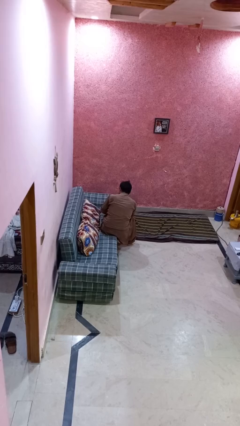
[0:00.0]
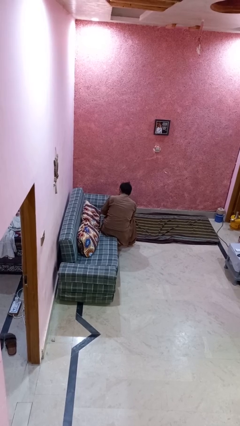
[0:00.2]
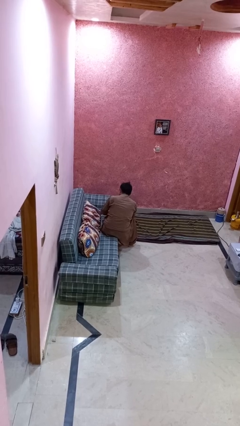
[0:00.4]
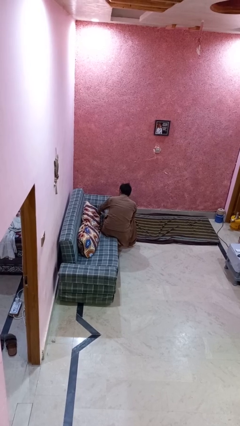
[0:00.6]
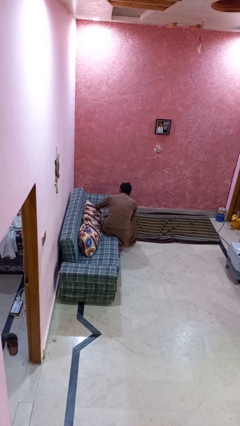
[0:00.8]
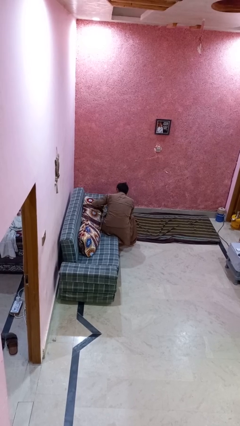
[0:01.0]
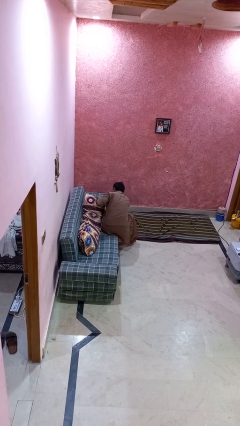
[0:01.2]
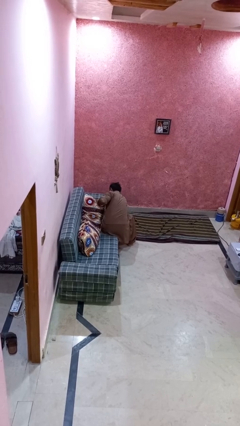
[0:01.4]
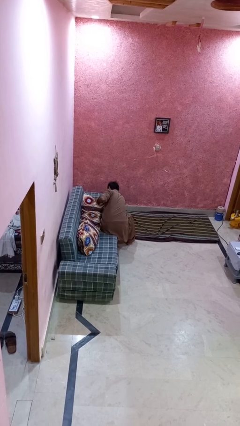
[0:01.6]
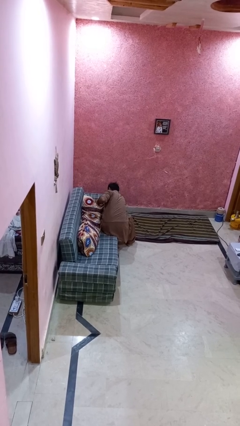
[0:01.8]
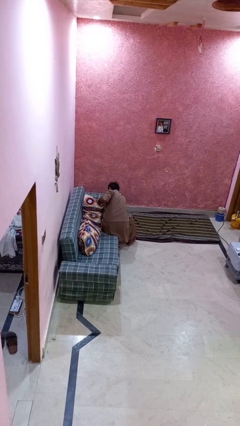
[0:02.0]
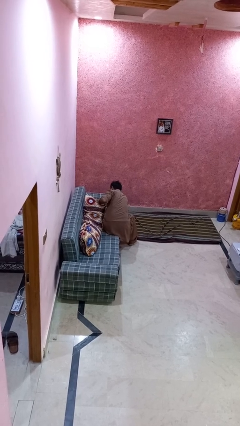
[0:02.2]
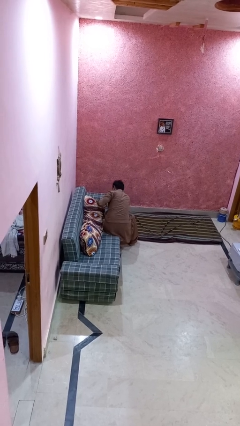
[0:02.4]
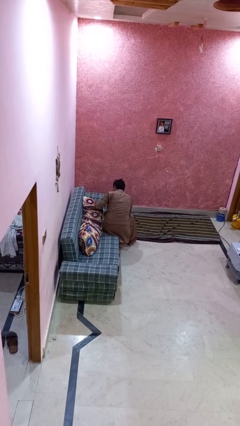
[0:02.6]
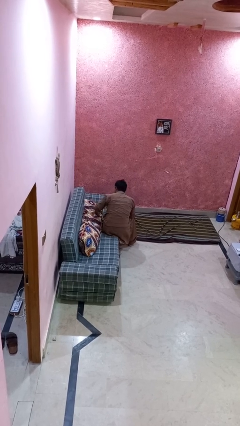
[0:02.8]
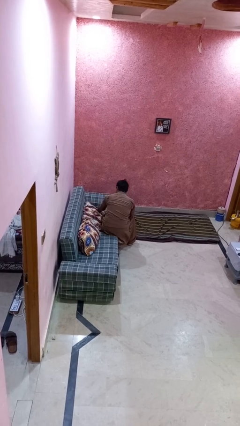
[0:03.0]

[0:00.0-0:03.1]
person searches in couch

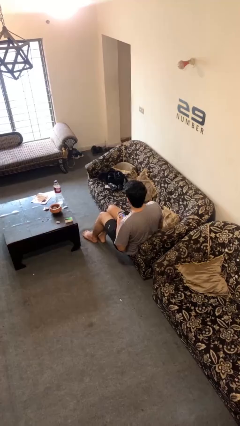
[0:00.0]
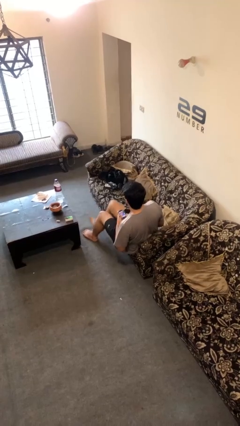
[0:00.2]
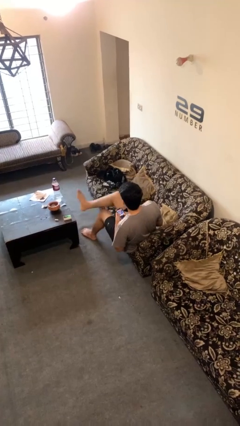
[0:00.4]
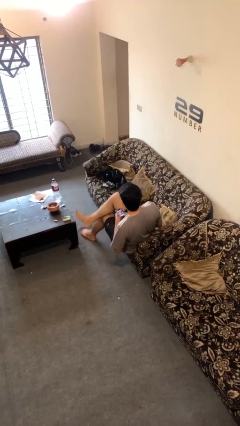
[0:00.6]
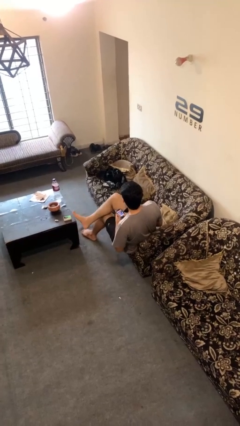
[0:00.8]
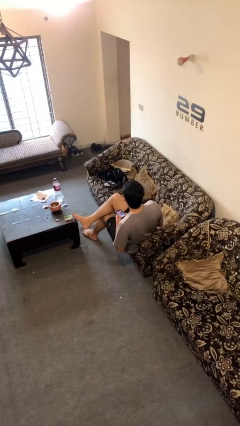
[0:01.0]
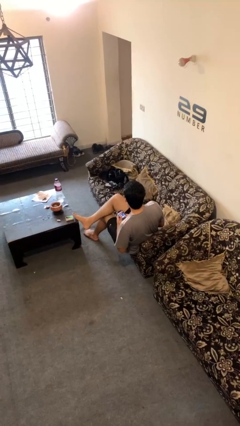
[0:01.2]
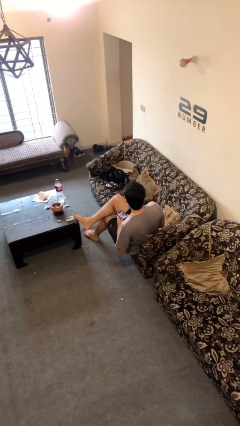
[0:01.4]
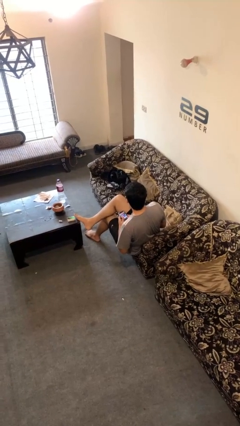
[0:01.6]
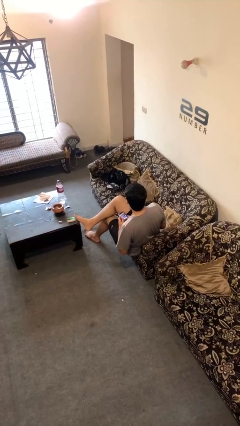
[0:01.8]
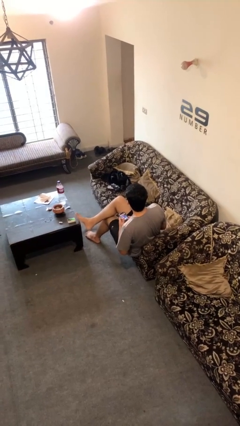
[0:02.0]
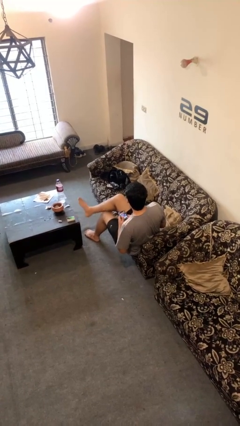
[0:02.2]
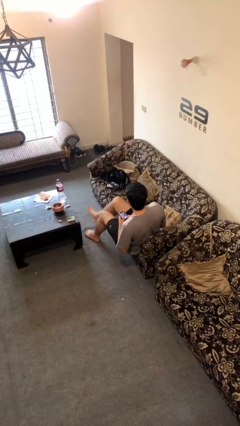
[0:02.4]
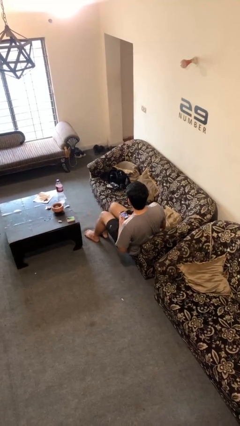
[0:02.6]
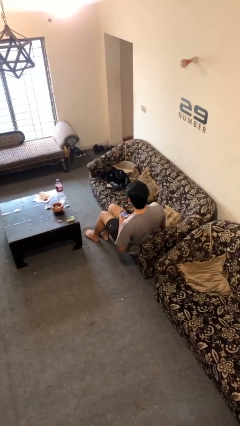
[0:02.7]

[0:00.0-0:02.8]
person crosses legs

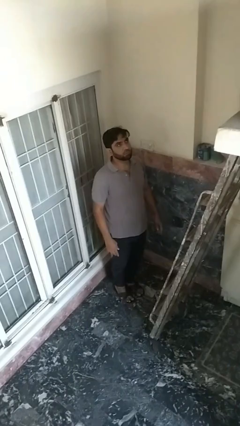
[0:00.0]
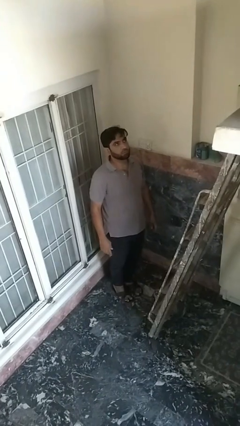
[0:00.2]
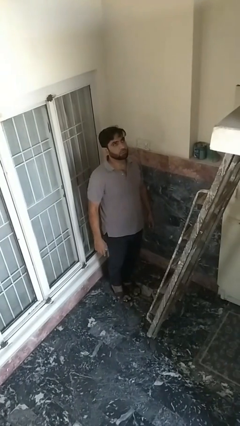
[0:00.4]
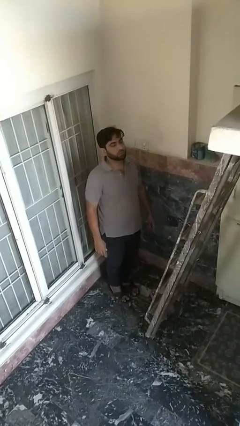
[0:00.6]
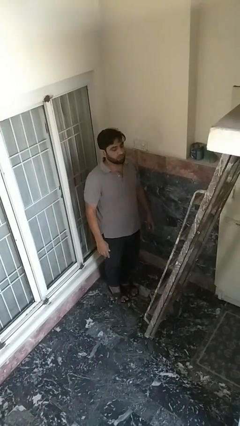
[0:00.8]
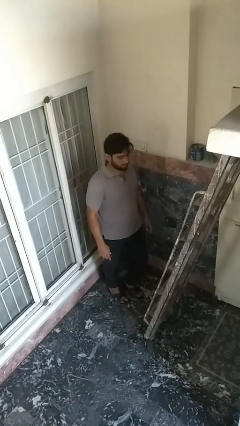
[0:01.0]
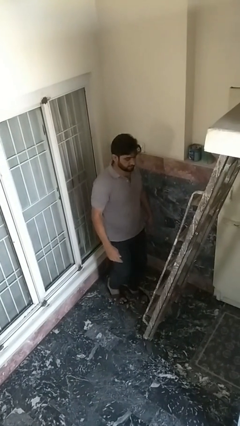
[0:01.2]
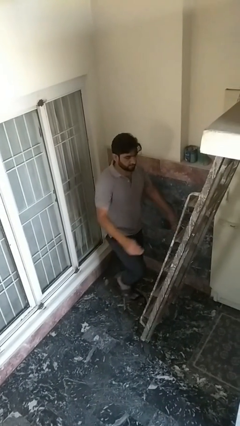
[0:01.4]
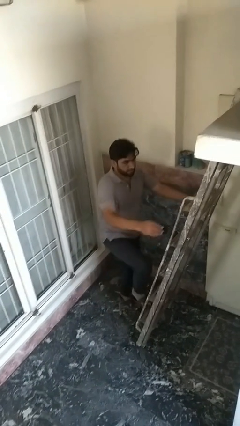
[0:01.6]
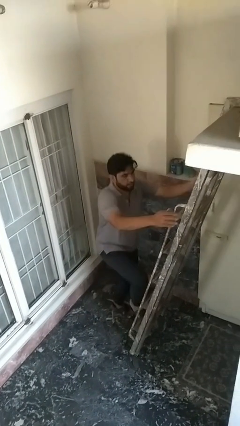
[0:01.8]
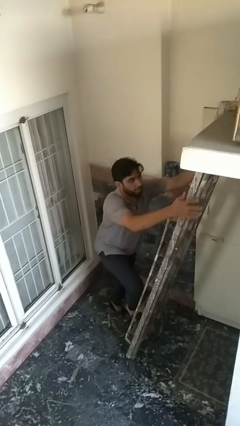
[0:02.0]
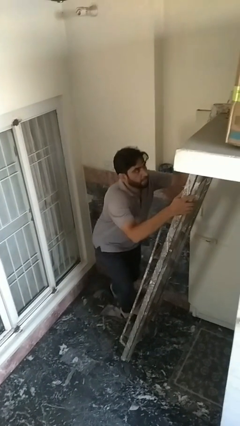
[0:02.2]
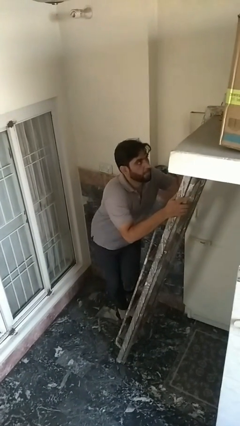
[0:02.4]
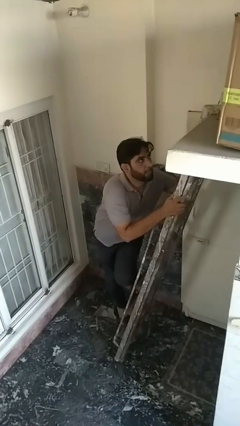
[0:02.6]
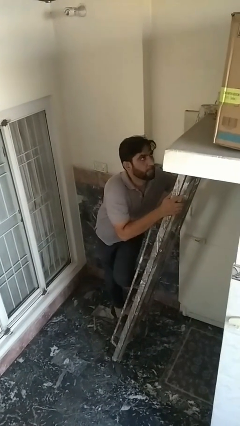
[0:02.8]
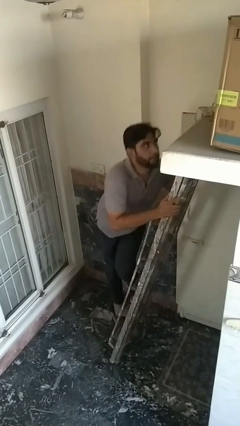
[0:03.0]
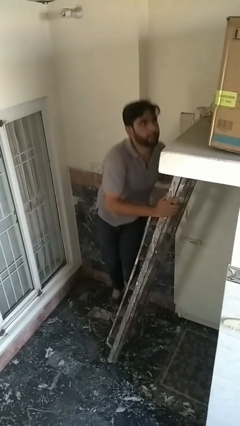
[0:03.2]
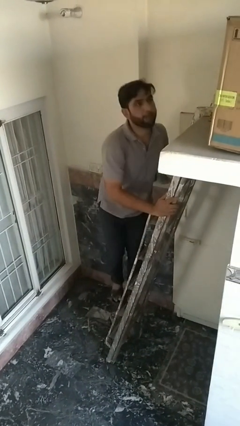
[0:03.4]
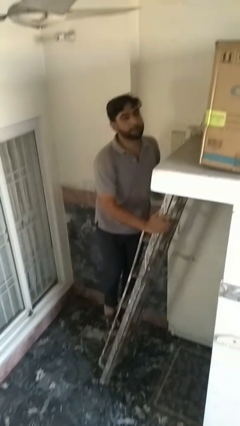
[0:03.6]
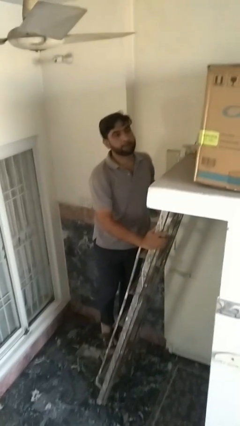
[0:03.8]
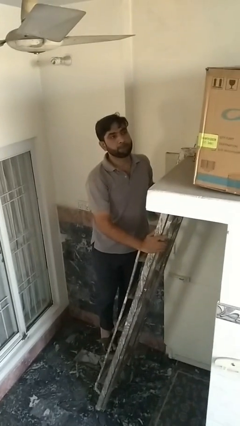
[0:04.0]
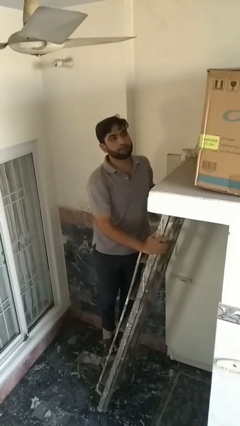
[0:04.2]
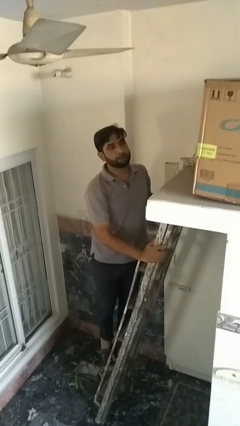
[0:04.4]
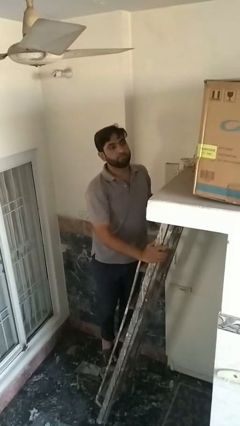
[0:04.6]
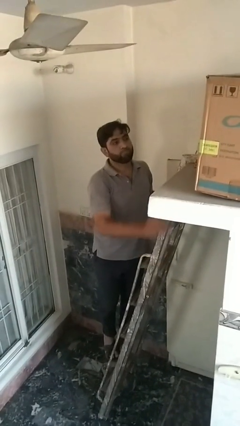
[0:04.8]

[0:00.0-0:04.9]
person climbs up ladder

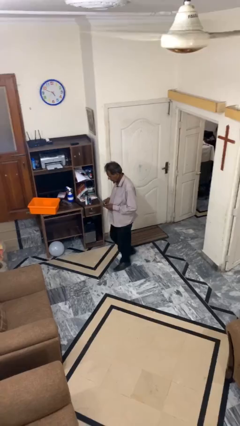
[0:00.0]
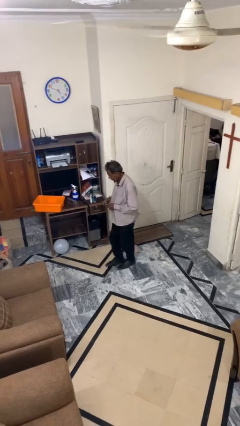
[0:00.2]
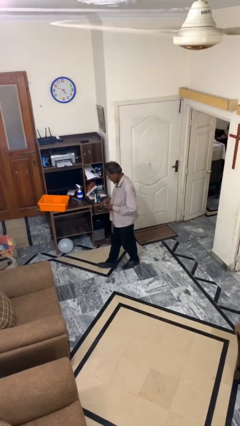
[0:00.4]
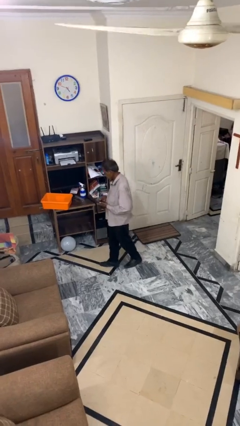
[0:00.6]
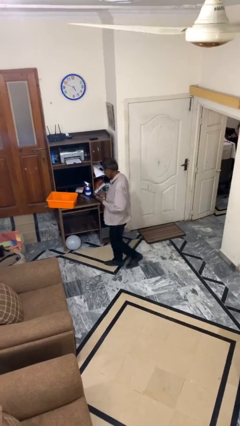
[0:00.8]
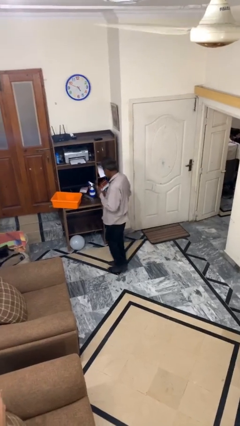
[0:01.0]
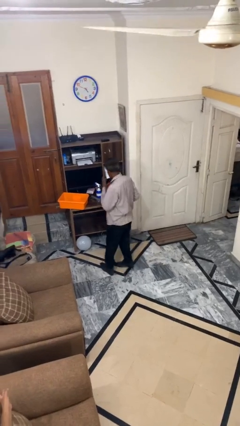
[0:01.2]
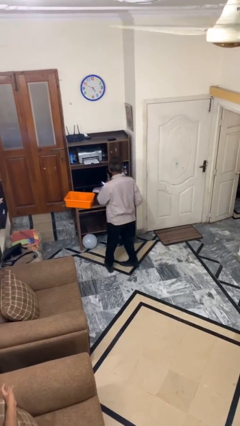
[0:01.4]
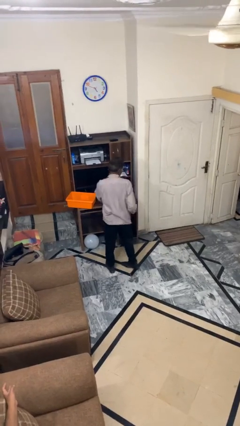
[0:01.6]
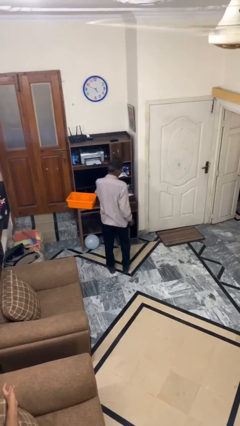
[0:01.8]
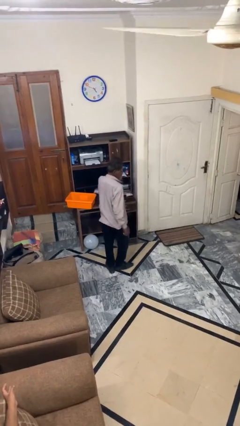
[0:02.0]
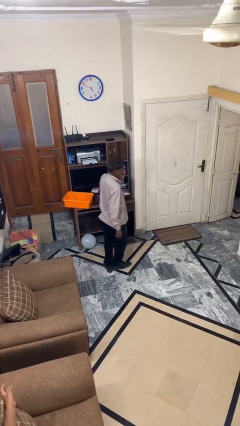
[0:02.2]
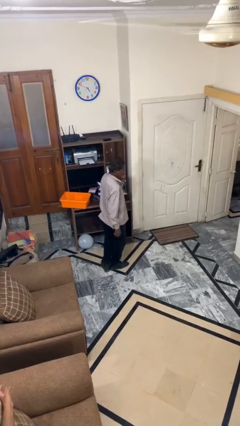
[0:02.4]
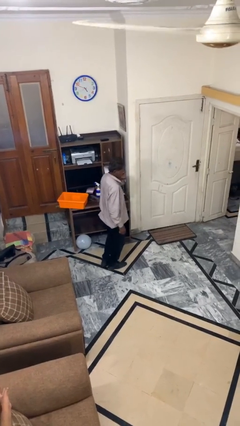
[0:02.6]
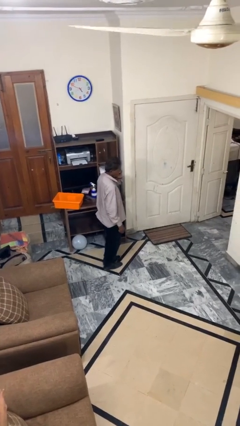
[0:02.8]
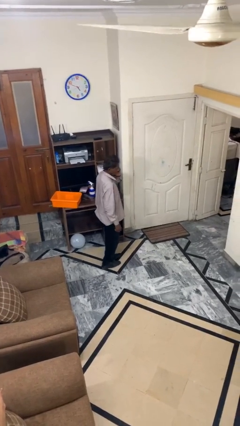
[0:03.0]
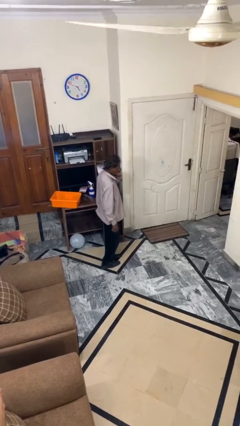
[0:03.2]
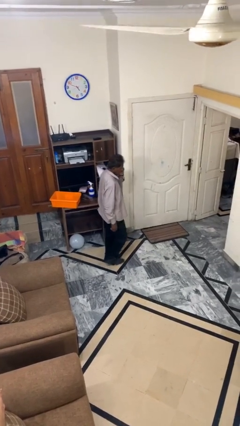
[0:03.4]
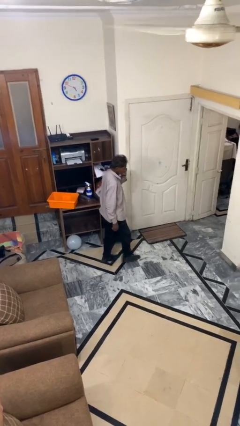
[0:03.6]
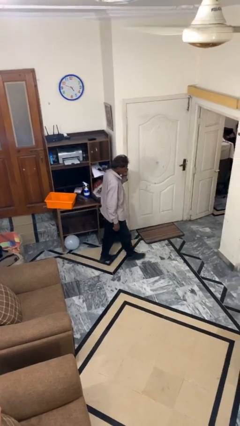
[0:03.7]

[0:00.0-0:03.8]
person talks on phone

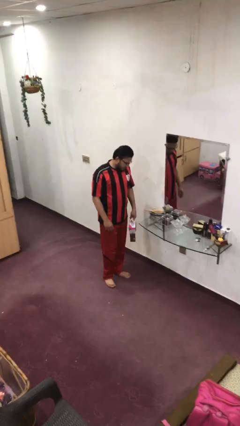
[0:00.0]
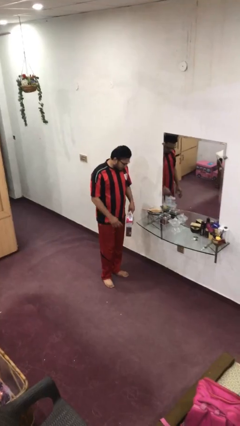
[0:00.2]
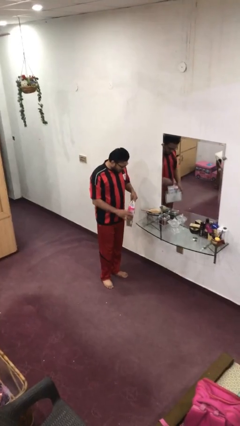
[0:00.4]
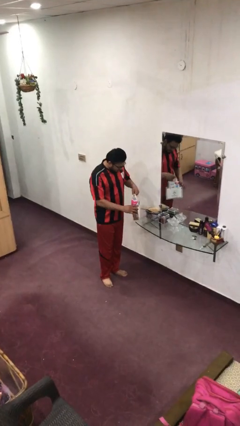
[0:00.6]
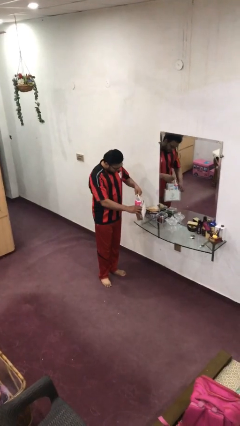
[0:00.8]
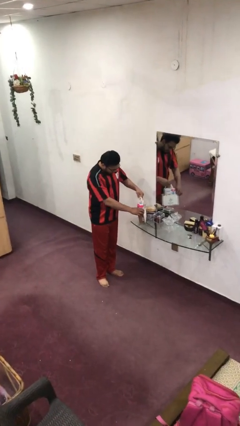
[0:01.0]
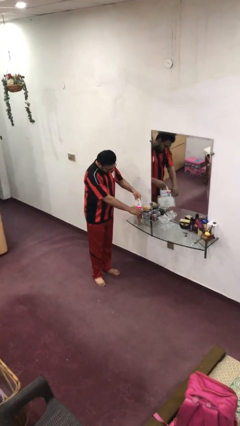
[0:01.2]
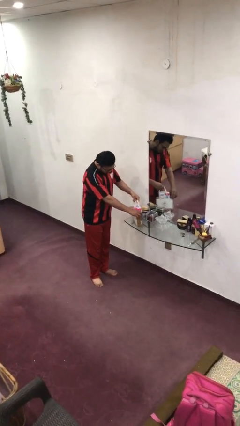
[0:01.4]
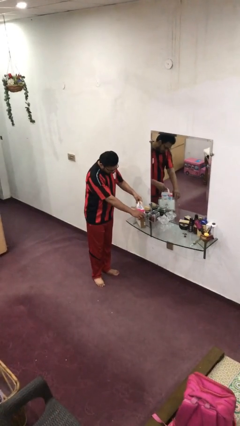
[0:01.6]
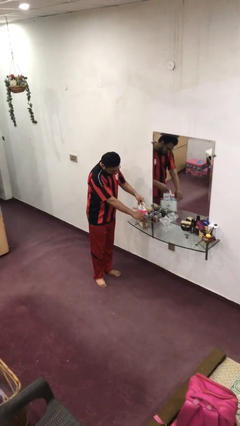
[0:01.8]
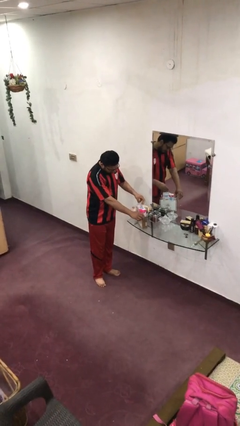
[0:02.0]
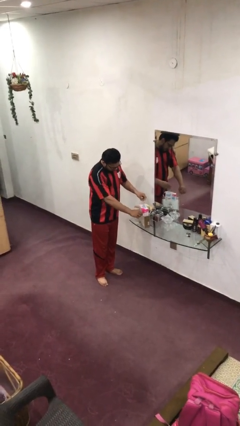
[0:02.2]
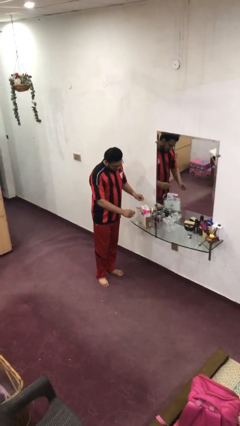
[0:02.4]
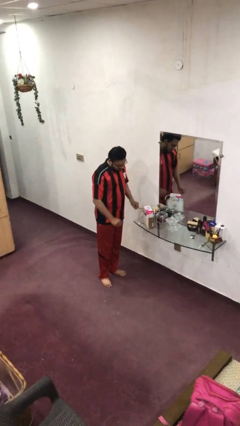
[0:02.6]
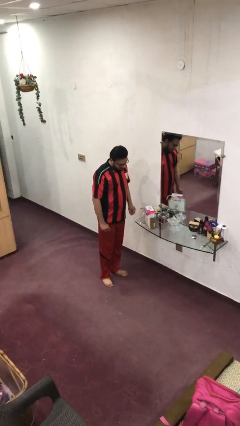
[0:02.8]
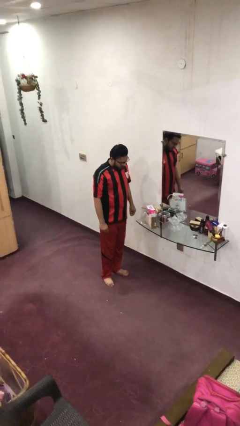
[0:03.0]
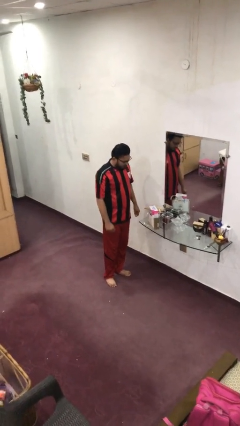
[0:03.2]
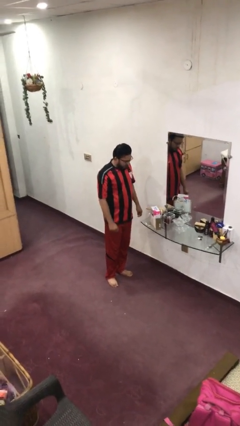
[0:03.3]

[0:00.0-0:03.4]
person puts down object on table

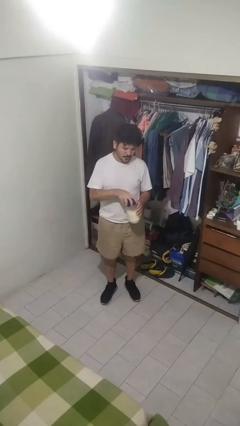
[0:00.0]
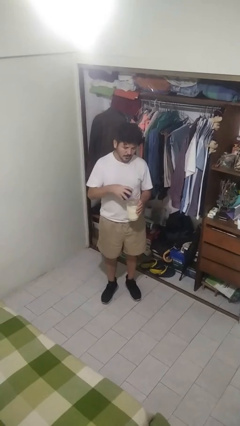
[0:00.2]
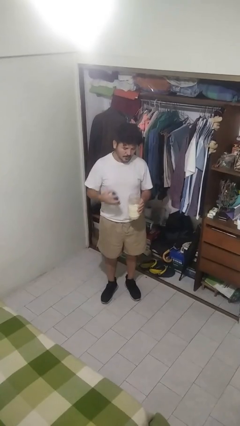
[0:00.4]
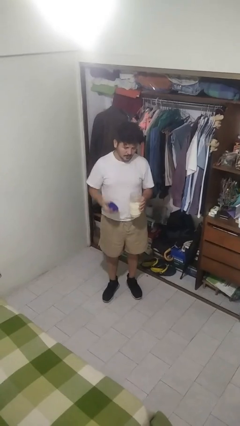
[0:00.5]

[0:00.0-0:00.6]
person opens jar
